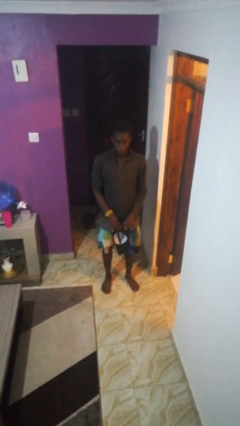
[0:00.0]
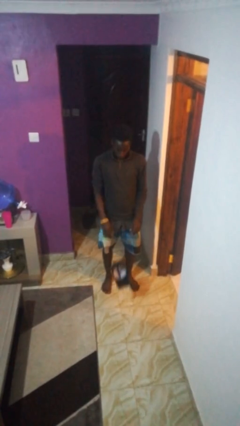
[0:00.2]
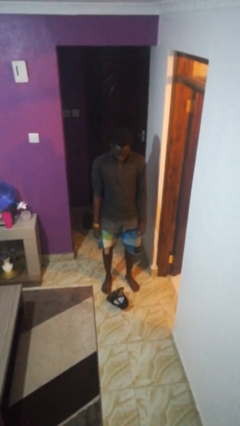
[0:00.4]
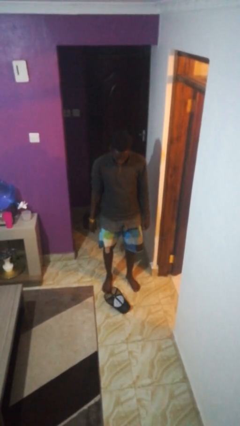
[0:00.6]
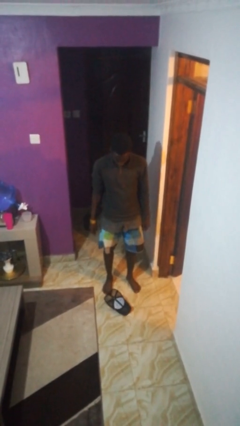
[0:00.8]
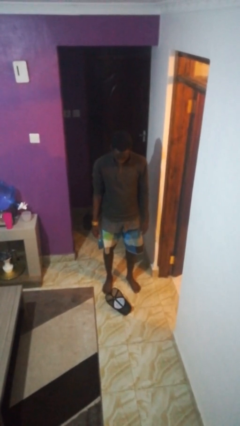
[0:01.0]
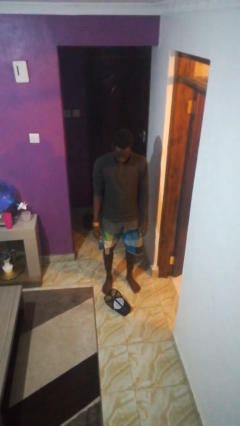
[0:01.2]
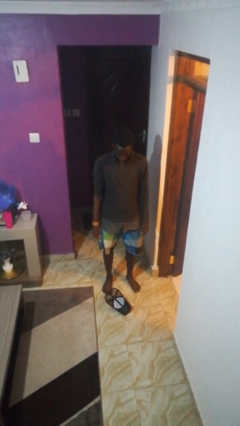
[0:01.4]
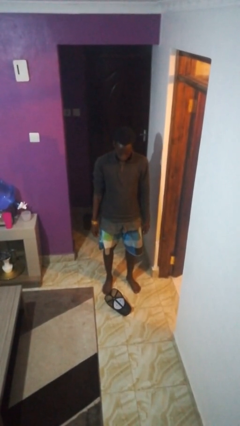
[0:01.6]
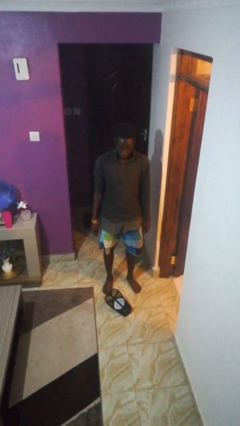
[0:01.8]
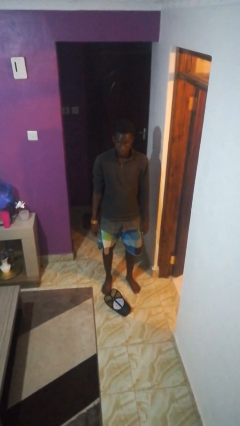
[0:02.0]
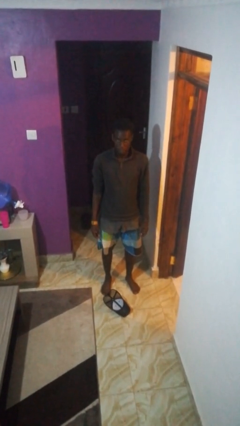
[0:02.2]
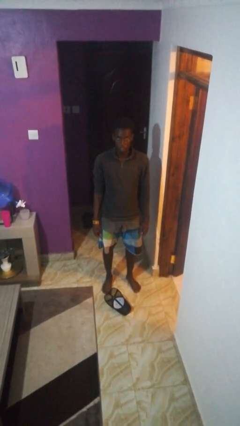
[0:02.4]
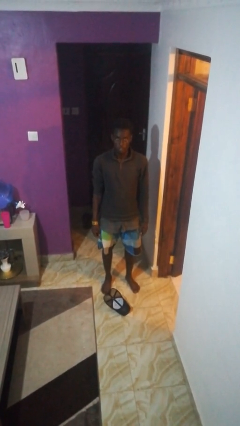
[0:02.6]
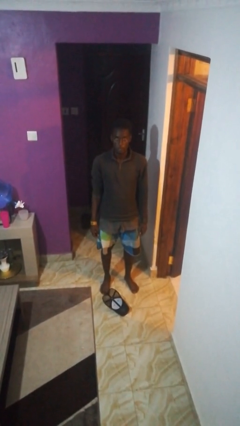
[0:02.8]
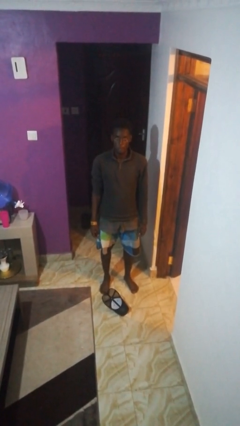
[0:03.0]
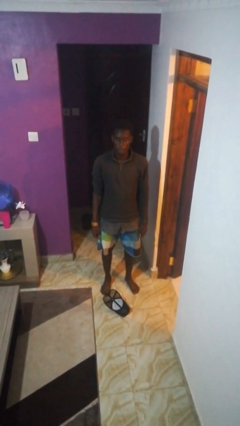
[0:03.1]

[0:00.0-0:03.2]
person drops object

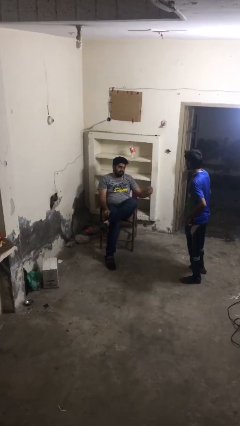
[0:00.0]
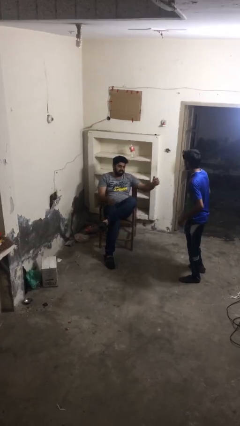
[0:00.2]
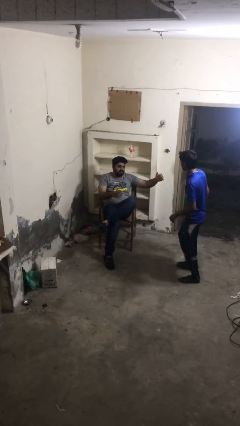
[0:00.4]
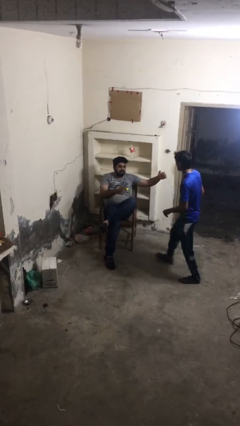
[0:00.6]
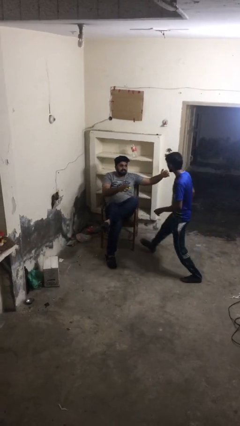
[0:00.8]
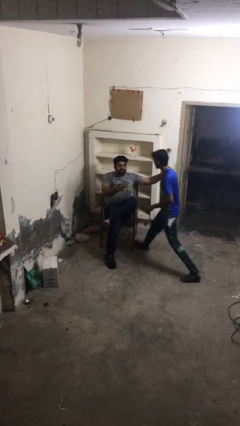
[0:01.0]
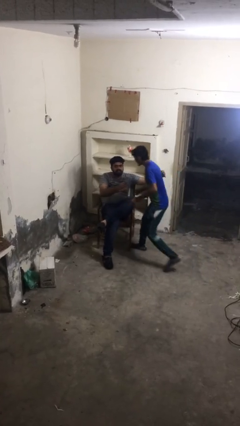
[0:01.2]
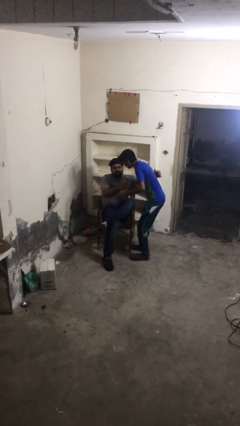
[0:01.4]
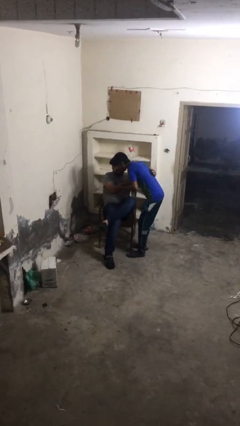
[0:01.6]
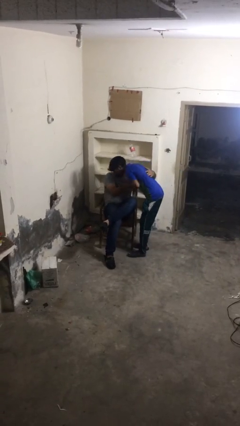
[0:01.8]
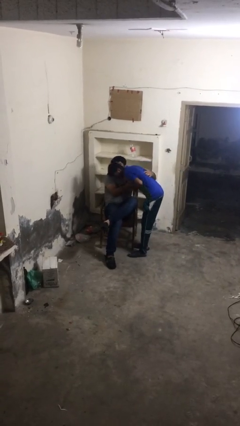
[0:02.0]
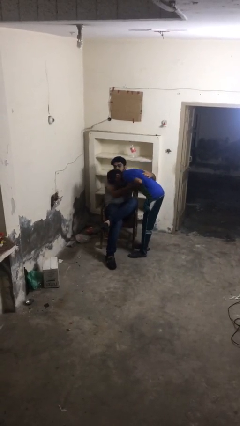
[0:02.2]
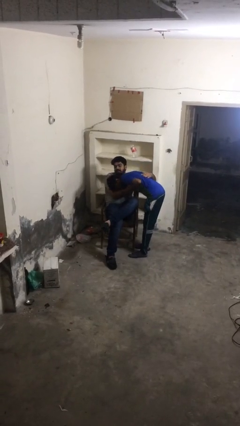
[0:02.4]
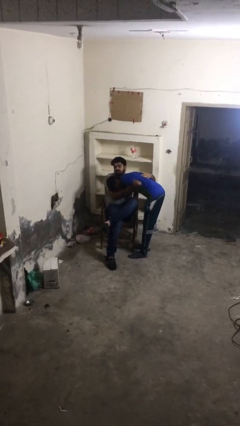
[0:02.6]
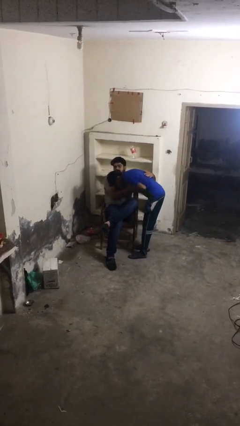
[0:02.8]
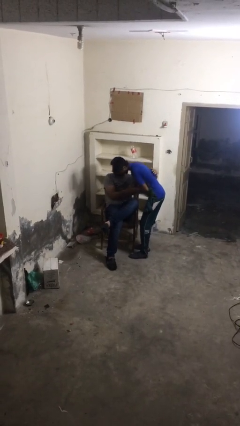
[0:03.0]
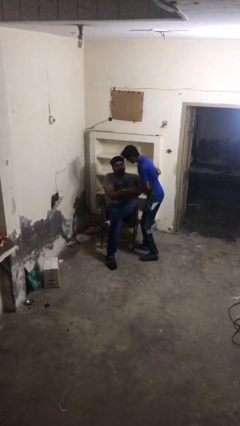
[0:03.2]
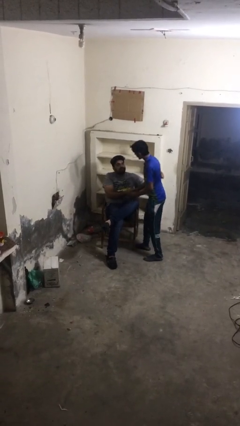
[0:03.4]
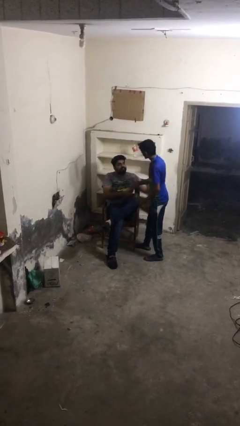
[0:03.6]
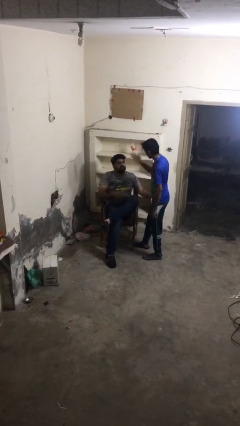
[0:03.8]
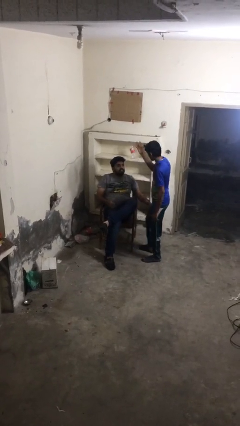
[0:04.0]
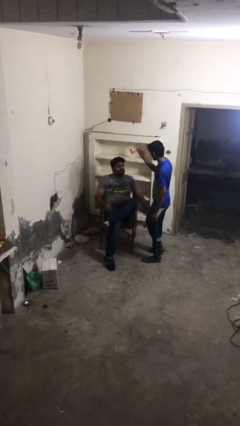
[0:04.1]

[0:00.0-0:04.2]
person embraces person

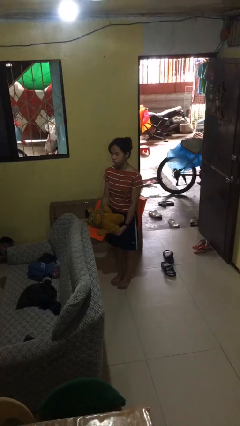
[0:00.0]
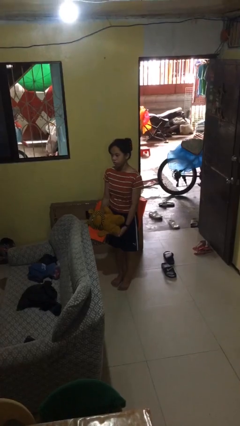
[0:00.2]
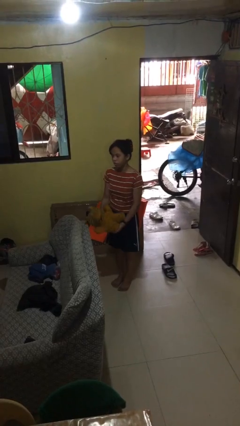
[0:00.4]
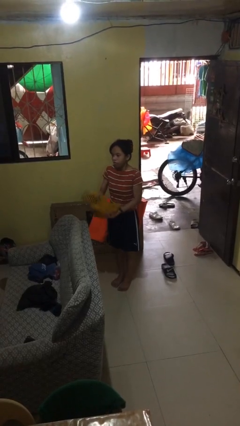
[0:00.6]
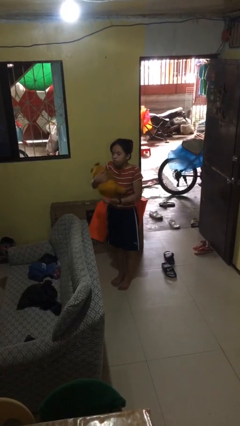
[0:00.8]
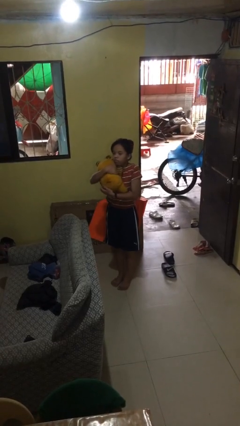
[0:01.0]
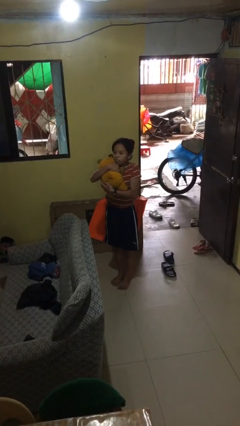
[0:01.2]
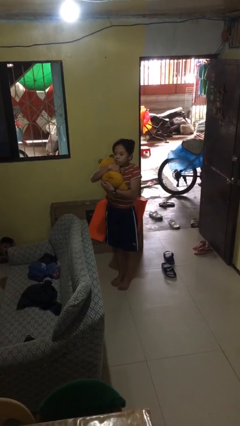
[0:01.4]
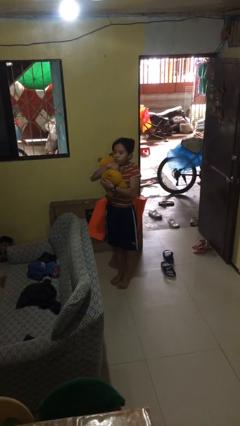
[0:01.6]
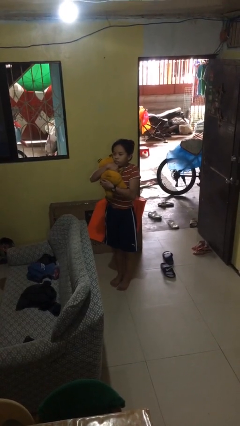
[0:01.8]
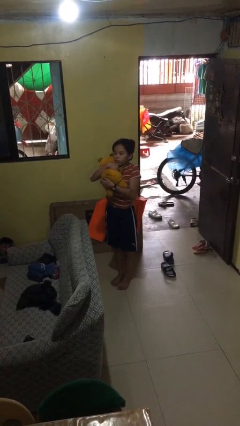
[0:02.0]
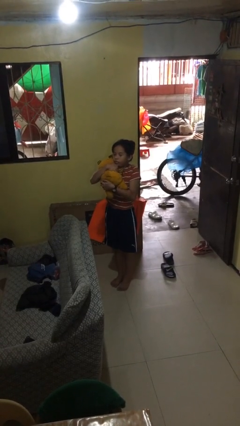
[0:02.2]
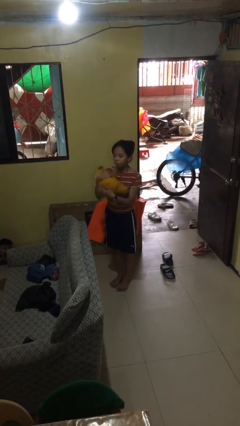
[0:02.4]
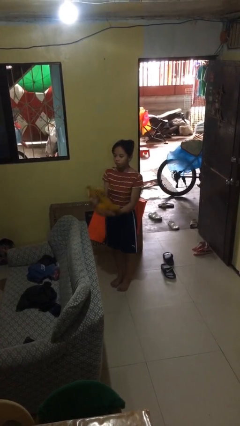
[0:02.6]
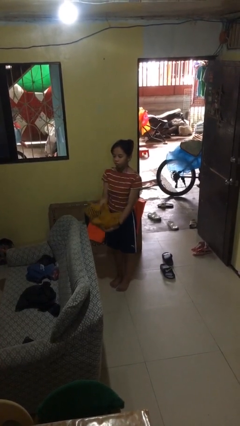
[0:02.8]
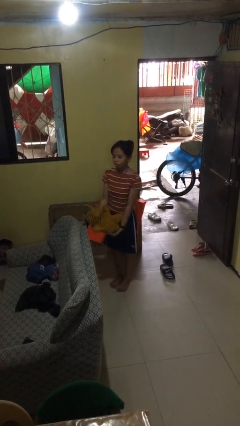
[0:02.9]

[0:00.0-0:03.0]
person hugs stuffed animal

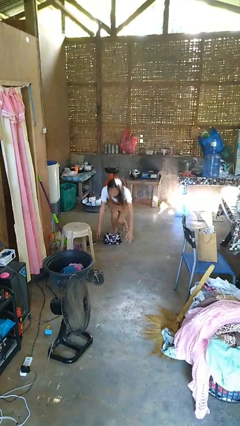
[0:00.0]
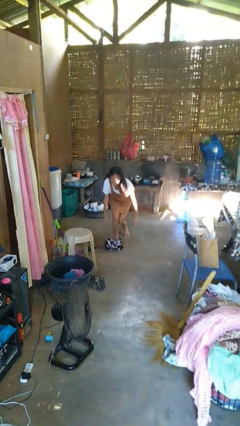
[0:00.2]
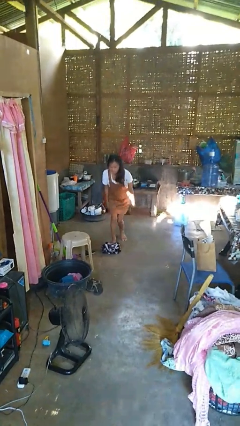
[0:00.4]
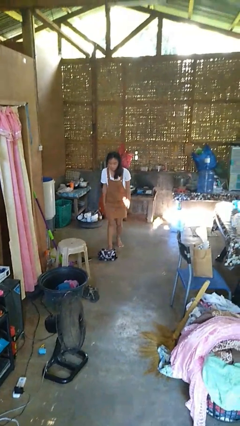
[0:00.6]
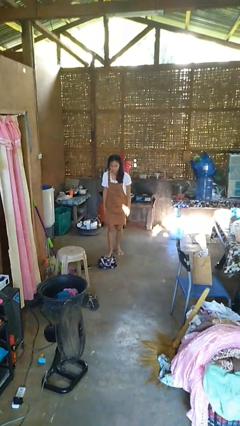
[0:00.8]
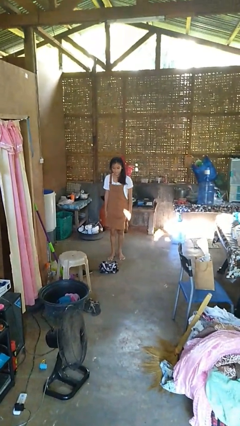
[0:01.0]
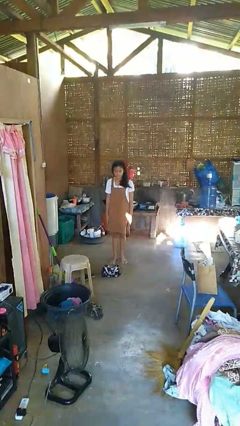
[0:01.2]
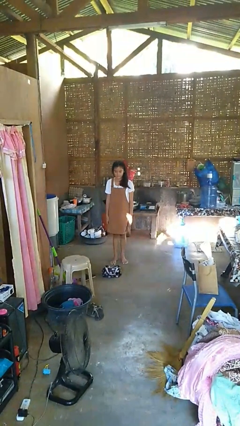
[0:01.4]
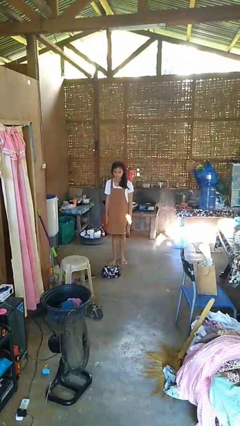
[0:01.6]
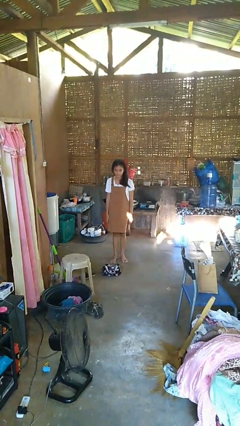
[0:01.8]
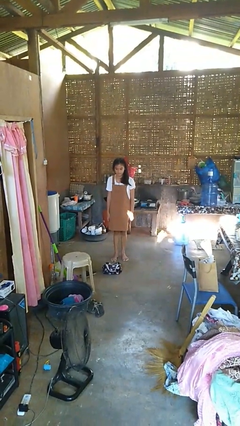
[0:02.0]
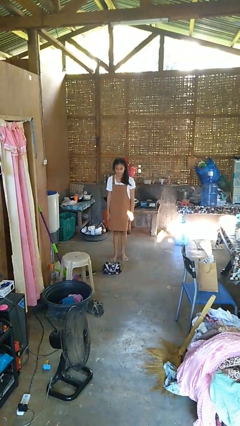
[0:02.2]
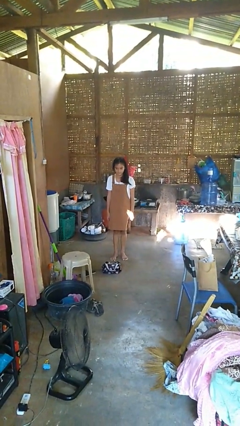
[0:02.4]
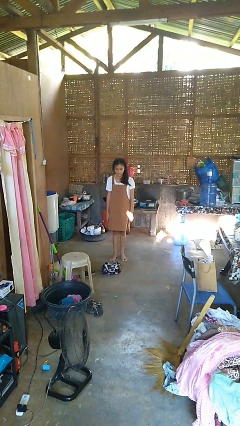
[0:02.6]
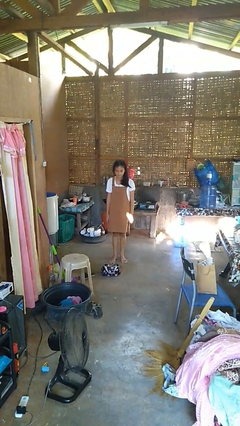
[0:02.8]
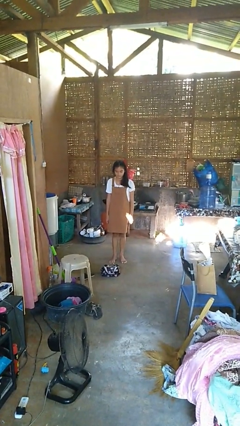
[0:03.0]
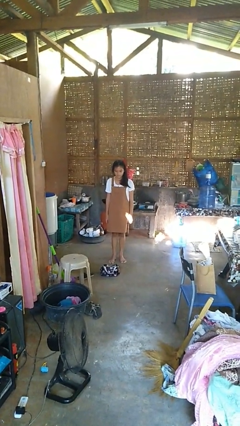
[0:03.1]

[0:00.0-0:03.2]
person stands up from floor

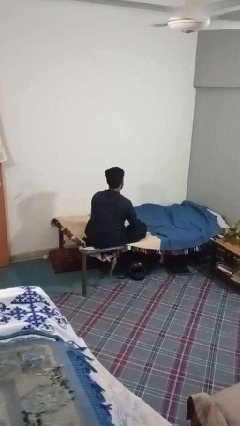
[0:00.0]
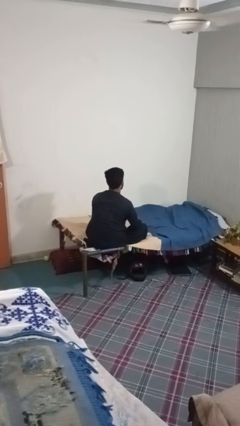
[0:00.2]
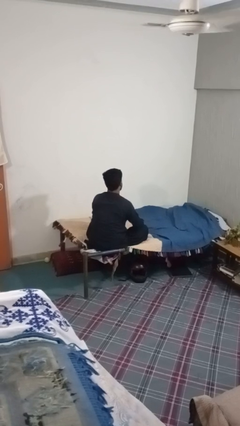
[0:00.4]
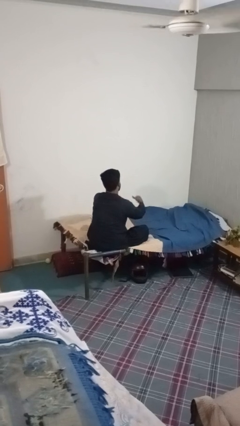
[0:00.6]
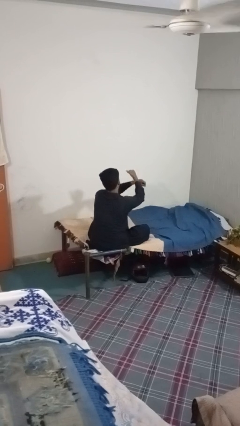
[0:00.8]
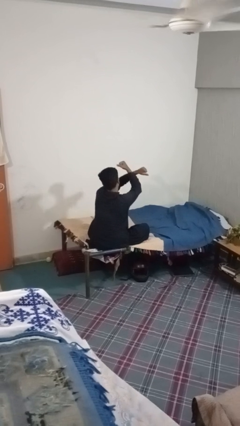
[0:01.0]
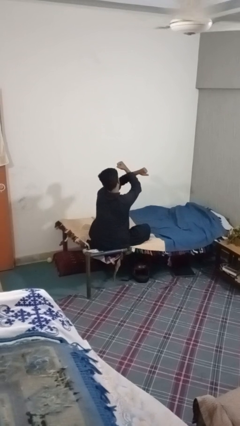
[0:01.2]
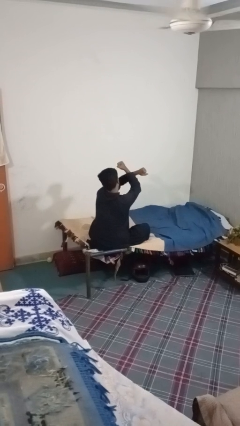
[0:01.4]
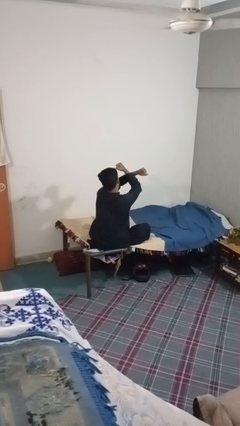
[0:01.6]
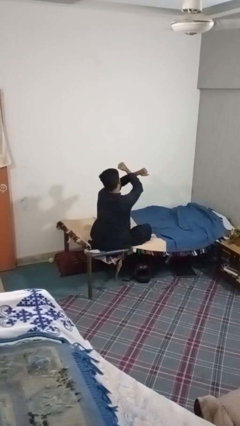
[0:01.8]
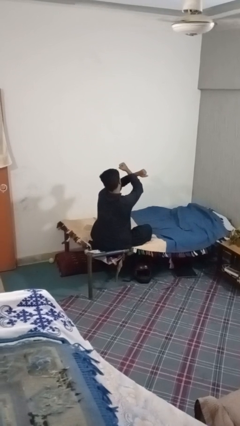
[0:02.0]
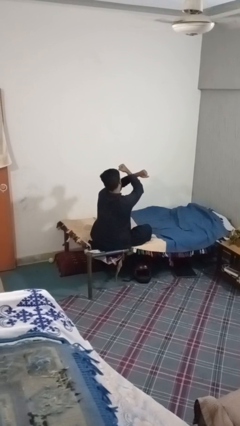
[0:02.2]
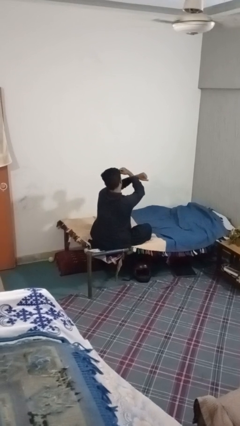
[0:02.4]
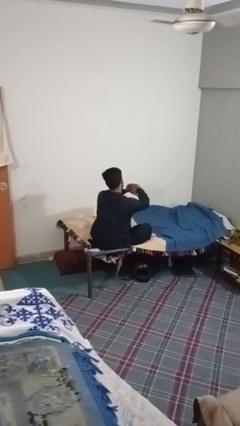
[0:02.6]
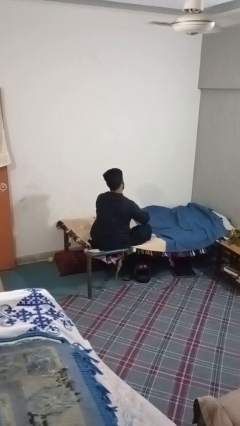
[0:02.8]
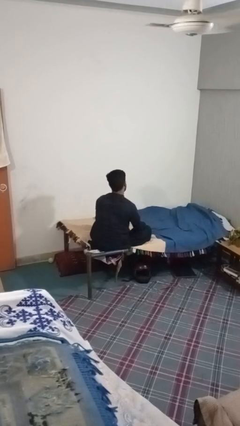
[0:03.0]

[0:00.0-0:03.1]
person gestures arms x

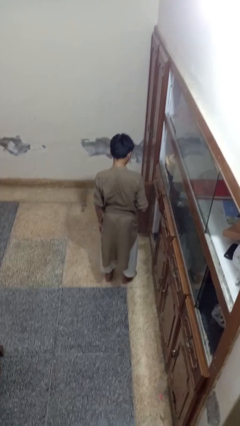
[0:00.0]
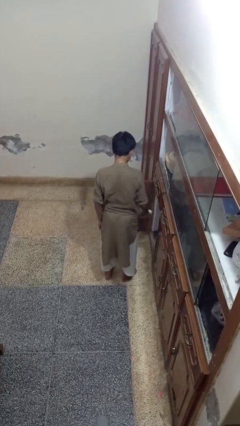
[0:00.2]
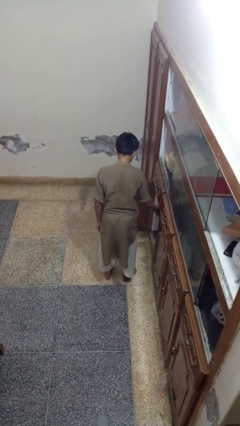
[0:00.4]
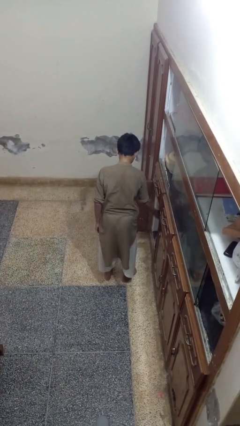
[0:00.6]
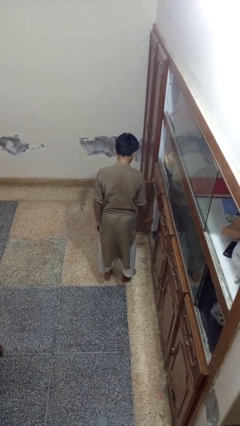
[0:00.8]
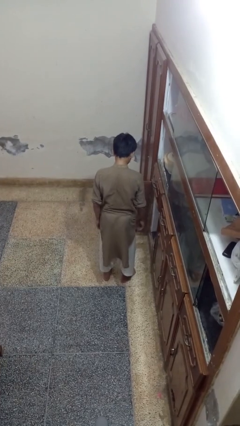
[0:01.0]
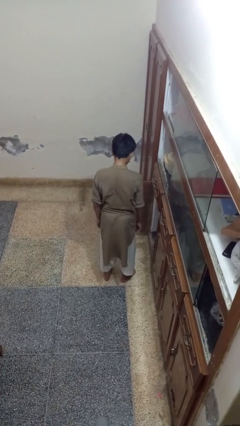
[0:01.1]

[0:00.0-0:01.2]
person puts object in cabinet

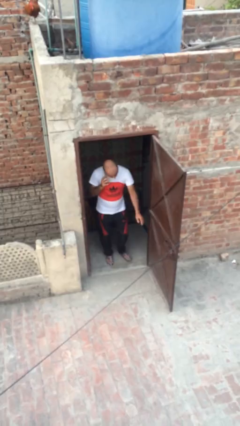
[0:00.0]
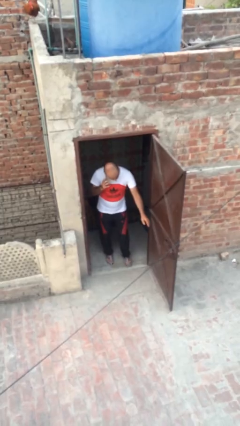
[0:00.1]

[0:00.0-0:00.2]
person closes facility door
